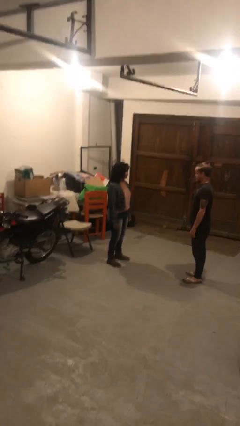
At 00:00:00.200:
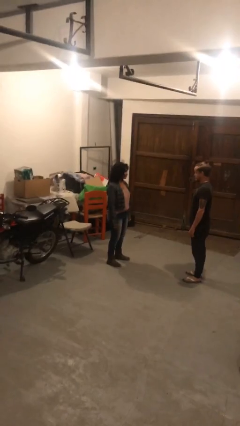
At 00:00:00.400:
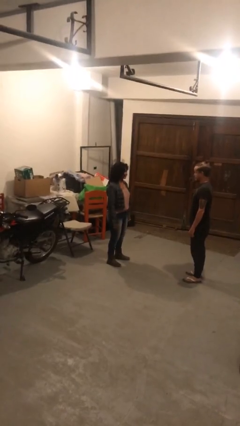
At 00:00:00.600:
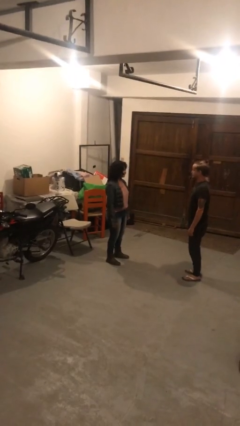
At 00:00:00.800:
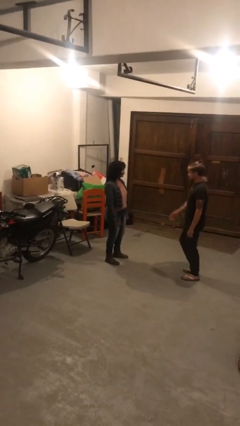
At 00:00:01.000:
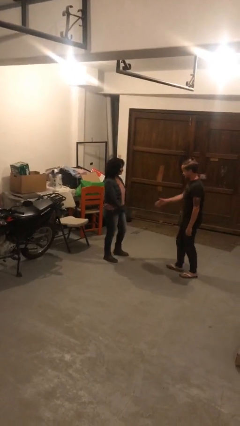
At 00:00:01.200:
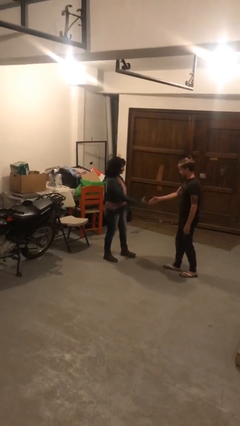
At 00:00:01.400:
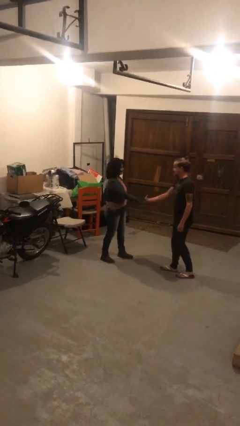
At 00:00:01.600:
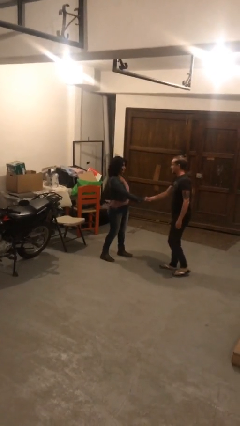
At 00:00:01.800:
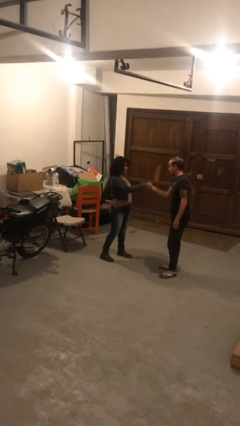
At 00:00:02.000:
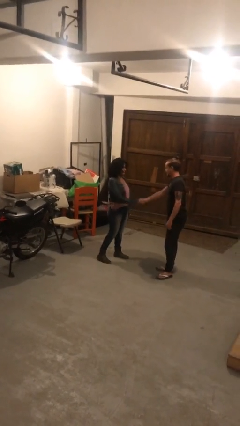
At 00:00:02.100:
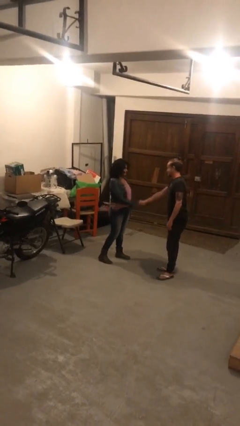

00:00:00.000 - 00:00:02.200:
person shakes hand

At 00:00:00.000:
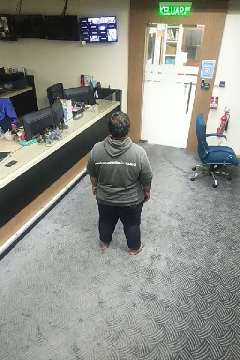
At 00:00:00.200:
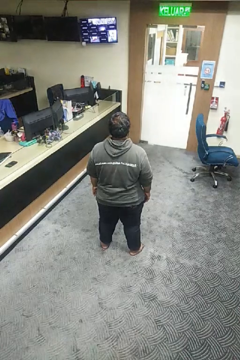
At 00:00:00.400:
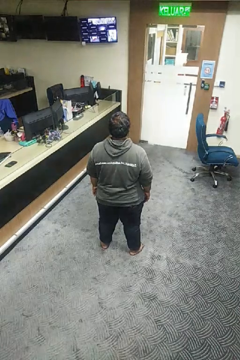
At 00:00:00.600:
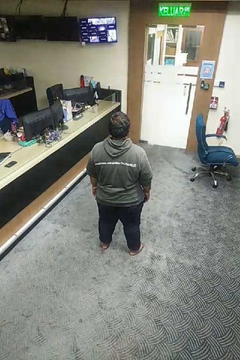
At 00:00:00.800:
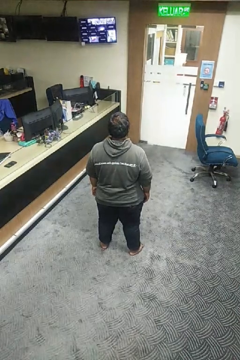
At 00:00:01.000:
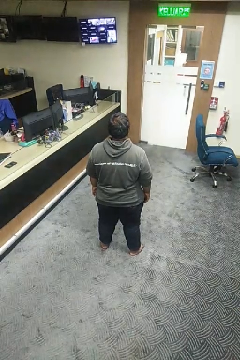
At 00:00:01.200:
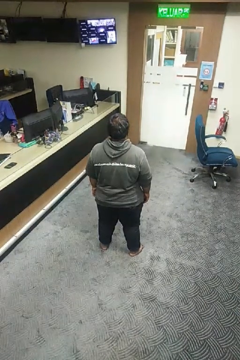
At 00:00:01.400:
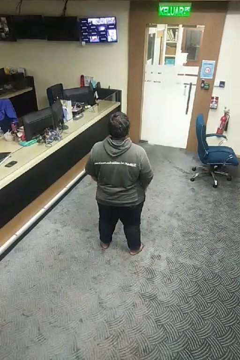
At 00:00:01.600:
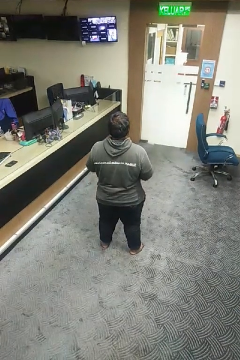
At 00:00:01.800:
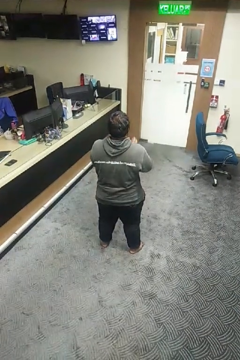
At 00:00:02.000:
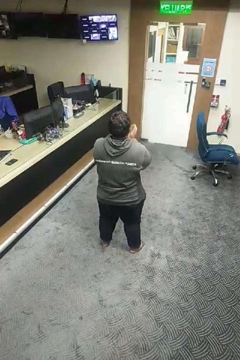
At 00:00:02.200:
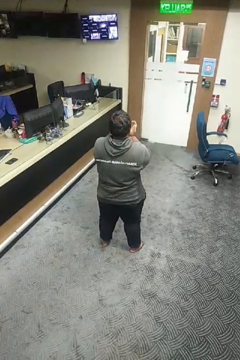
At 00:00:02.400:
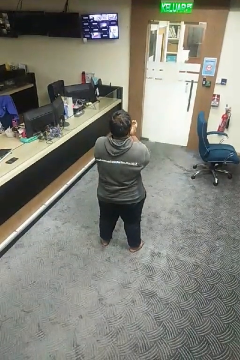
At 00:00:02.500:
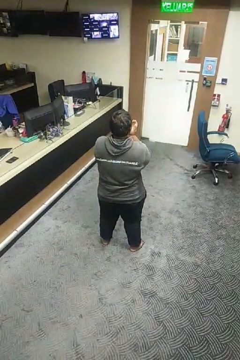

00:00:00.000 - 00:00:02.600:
person prays

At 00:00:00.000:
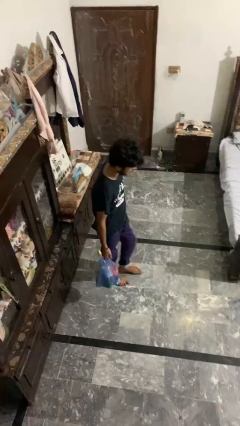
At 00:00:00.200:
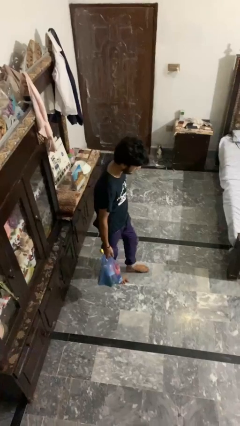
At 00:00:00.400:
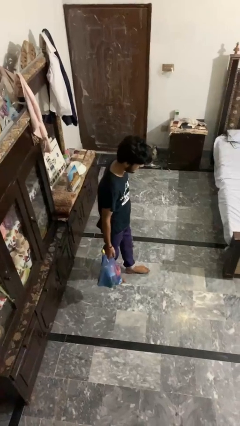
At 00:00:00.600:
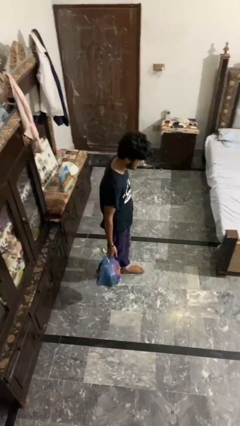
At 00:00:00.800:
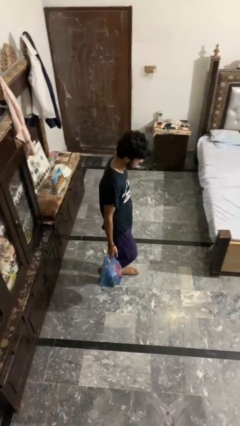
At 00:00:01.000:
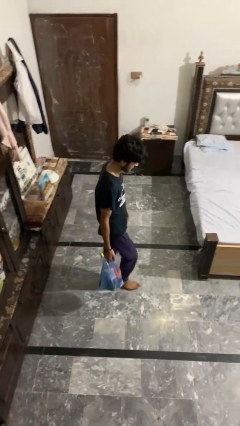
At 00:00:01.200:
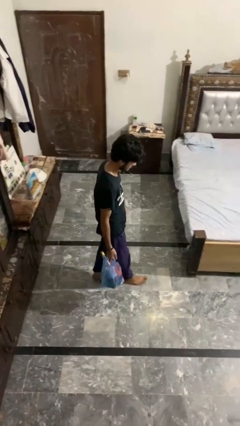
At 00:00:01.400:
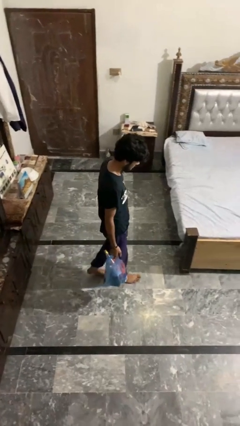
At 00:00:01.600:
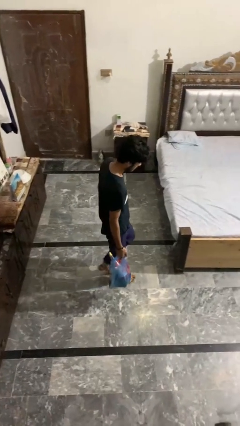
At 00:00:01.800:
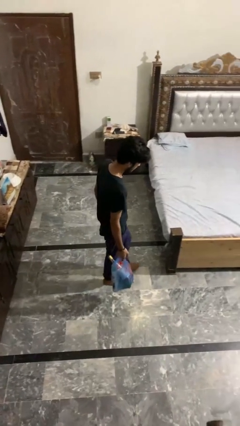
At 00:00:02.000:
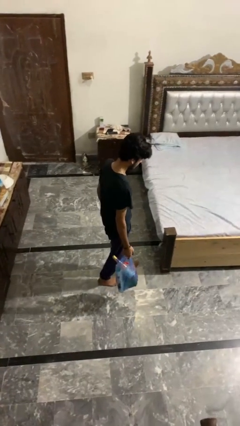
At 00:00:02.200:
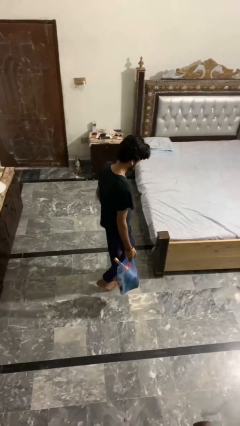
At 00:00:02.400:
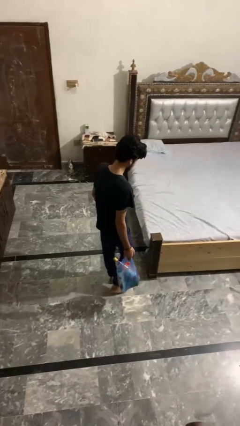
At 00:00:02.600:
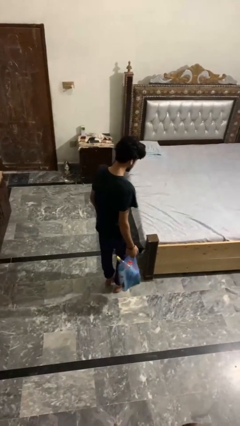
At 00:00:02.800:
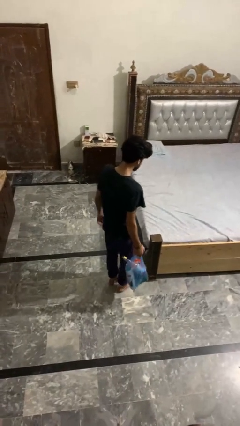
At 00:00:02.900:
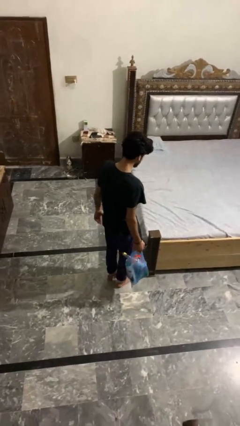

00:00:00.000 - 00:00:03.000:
person carries groceries

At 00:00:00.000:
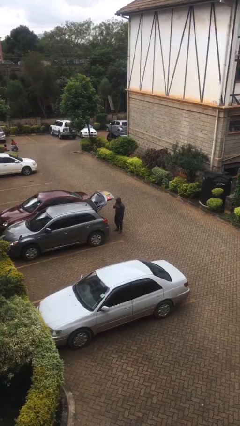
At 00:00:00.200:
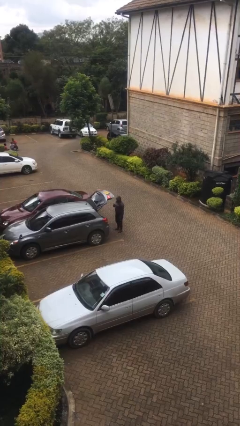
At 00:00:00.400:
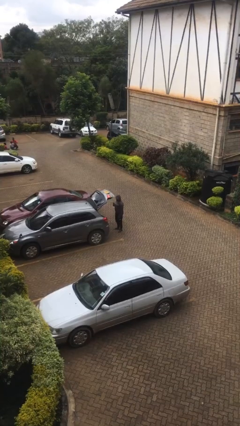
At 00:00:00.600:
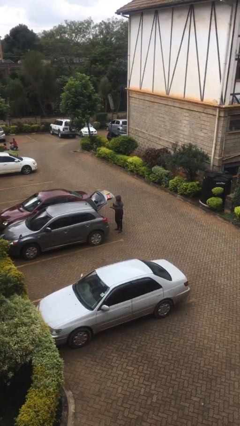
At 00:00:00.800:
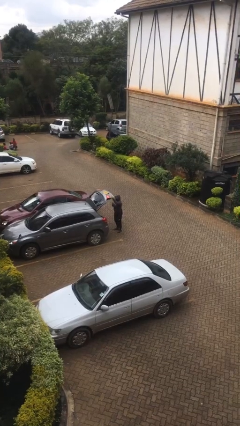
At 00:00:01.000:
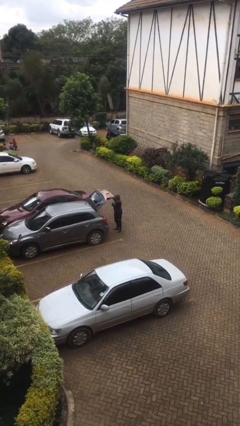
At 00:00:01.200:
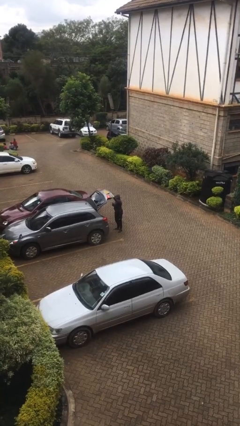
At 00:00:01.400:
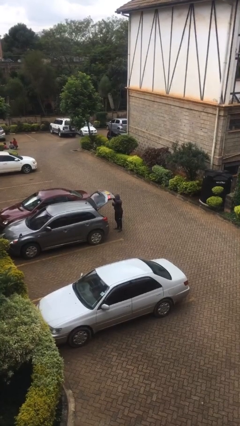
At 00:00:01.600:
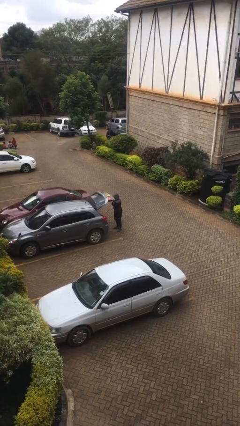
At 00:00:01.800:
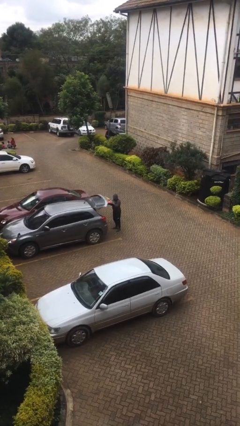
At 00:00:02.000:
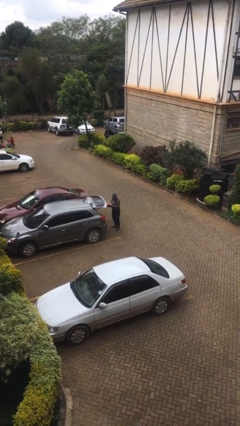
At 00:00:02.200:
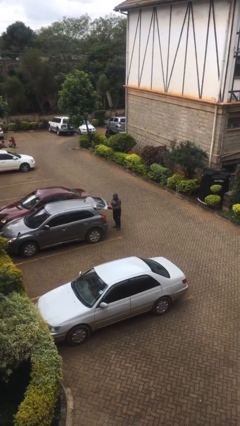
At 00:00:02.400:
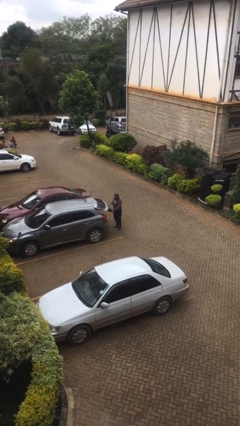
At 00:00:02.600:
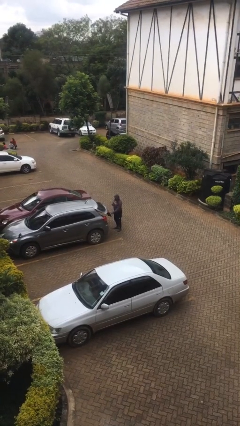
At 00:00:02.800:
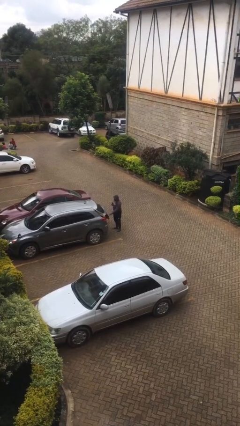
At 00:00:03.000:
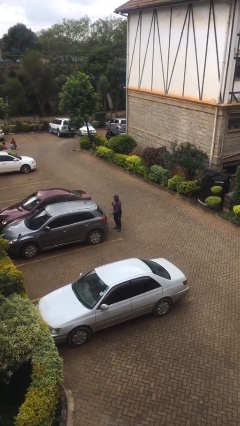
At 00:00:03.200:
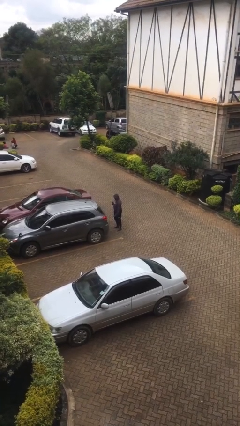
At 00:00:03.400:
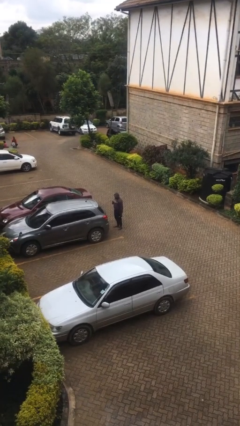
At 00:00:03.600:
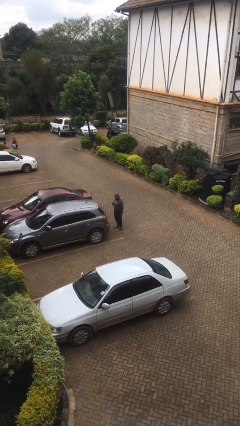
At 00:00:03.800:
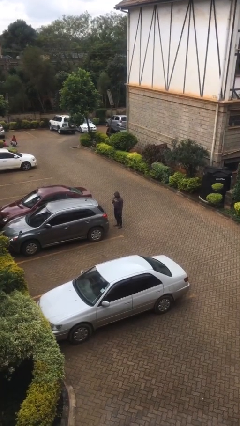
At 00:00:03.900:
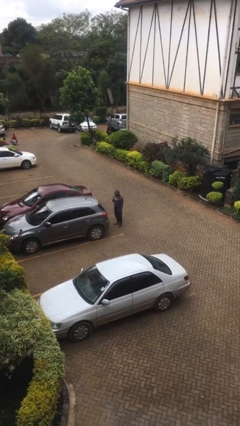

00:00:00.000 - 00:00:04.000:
person closes car trunk

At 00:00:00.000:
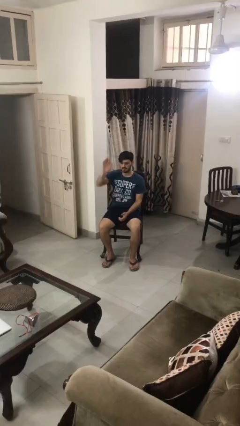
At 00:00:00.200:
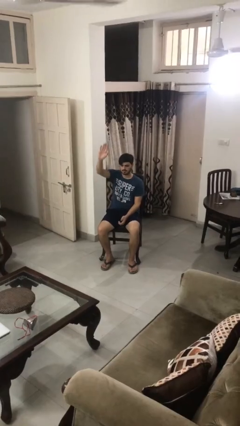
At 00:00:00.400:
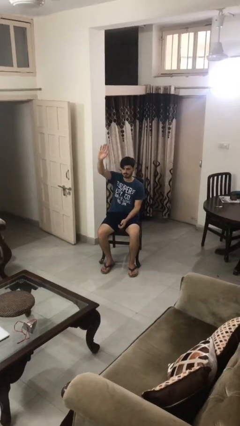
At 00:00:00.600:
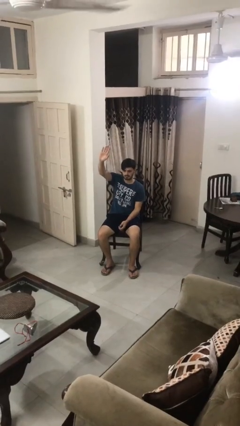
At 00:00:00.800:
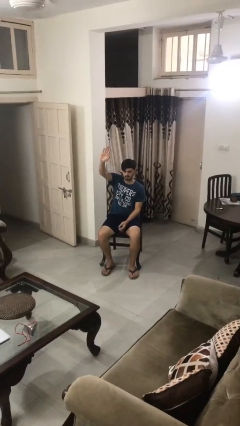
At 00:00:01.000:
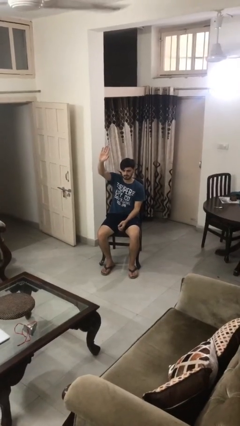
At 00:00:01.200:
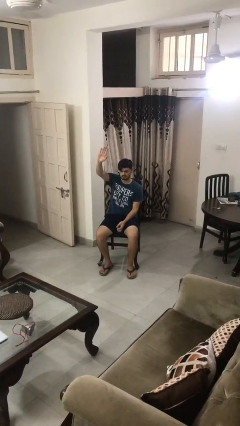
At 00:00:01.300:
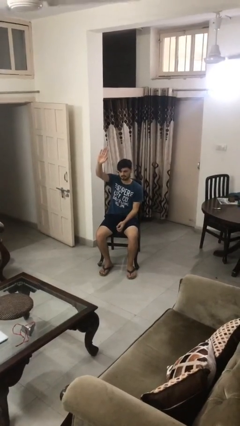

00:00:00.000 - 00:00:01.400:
person gestures raise hand

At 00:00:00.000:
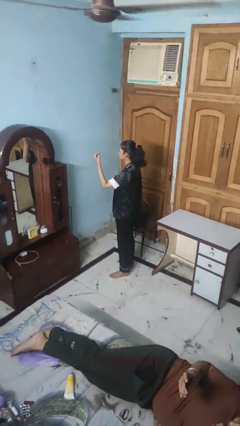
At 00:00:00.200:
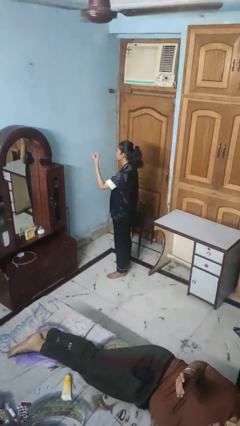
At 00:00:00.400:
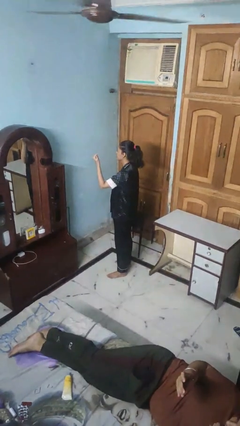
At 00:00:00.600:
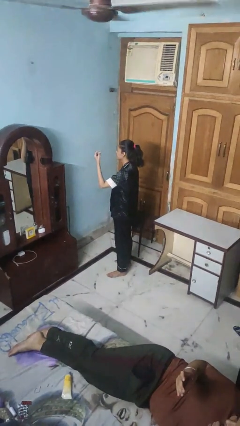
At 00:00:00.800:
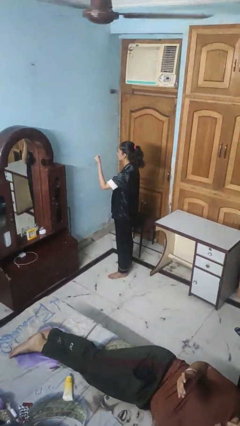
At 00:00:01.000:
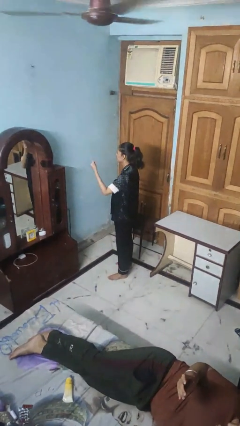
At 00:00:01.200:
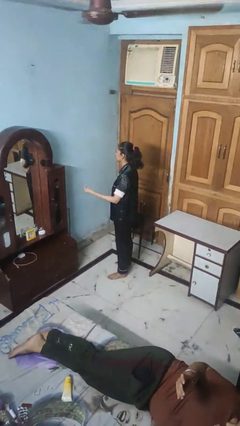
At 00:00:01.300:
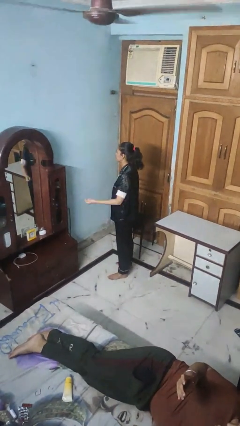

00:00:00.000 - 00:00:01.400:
person snaps fingers

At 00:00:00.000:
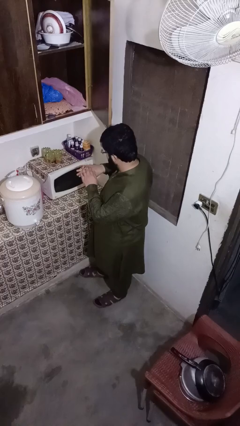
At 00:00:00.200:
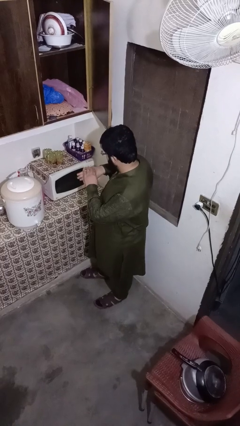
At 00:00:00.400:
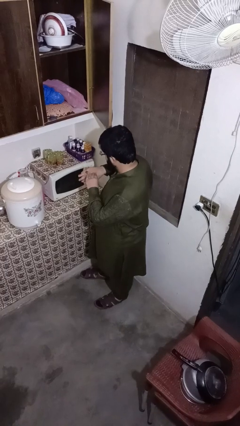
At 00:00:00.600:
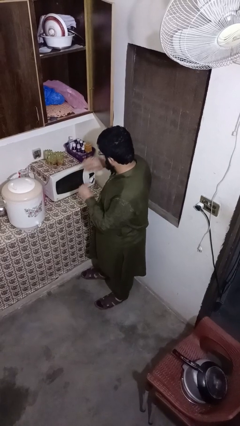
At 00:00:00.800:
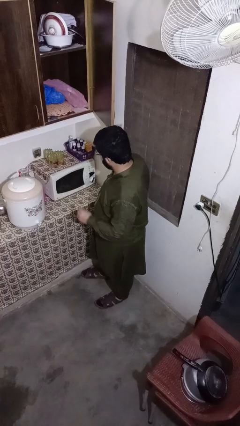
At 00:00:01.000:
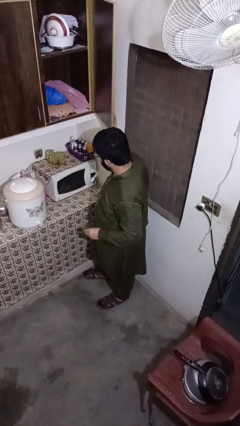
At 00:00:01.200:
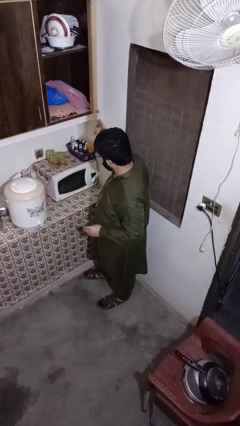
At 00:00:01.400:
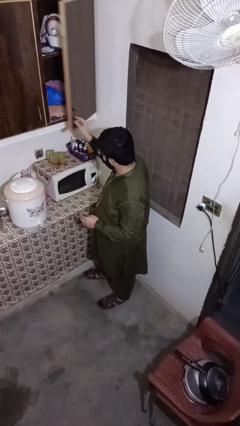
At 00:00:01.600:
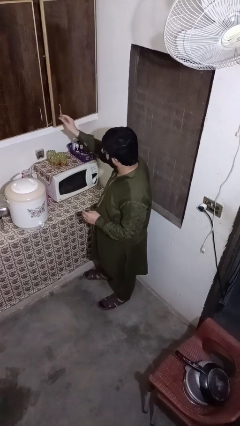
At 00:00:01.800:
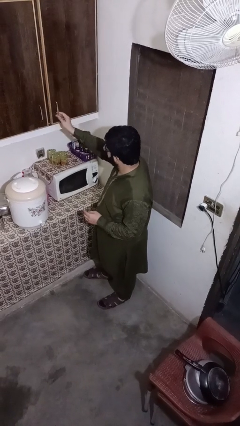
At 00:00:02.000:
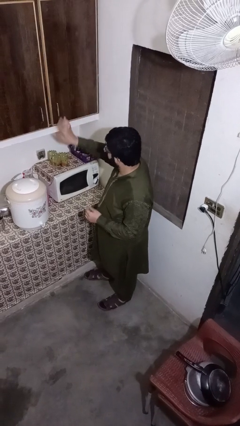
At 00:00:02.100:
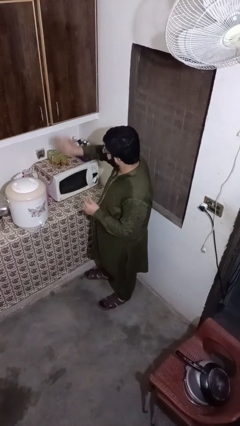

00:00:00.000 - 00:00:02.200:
person closes kitchen drawer

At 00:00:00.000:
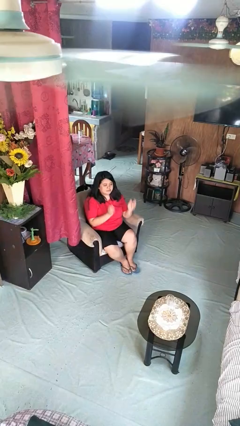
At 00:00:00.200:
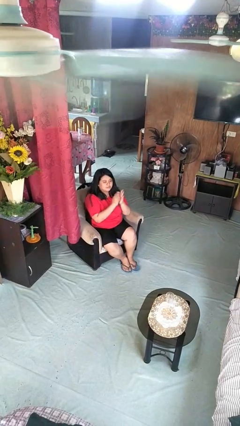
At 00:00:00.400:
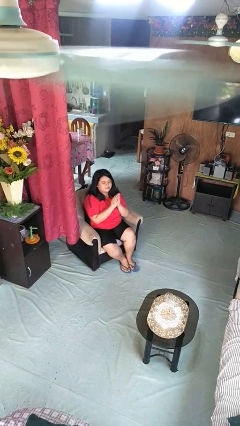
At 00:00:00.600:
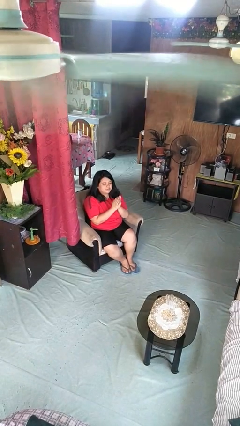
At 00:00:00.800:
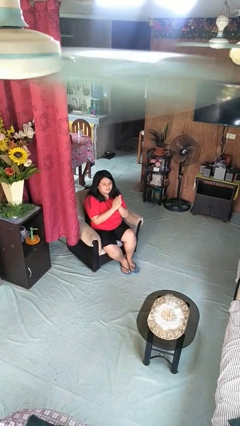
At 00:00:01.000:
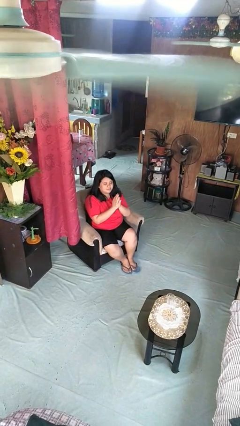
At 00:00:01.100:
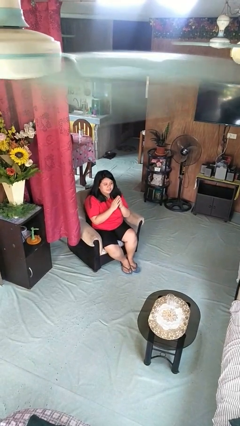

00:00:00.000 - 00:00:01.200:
person claps hands
